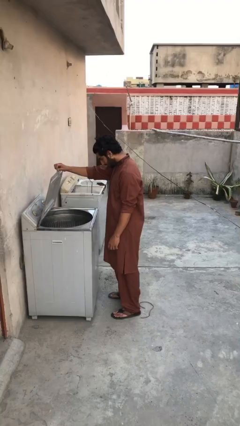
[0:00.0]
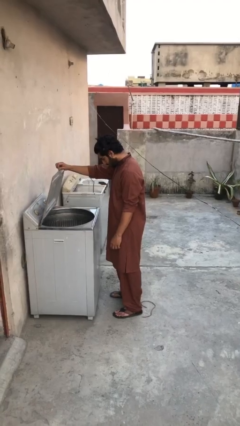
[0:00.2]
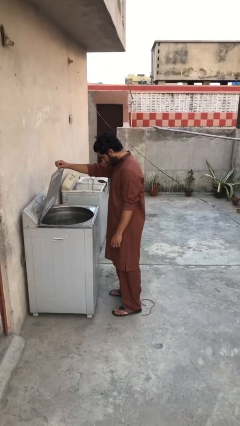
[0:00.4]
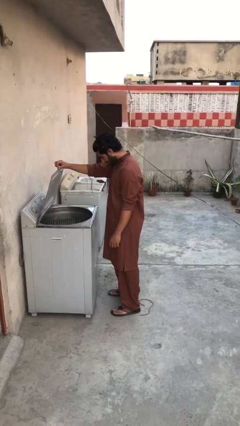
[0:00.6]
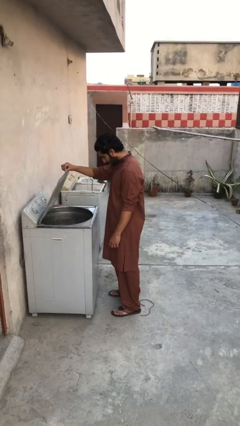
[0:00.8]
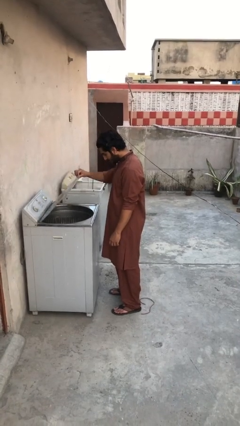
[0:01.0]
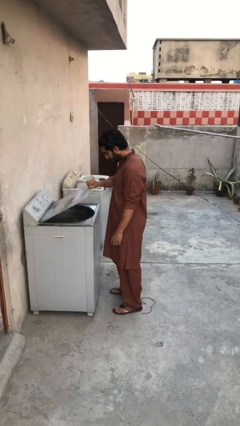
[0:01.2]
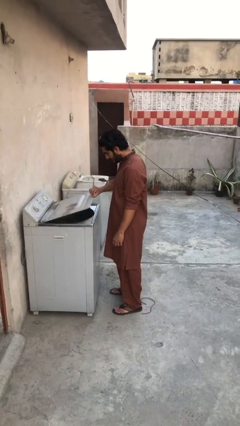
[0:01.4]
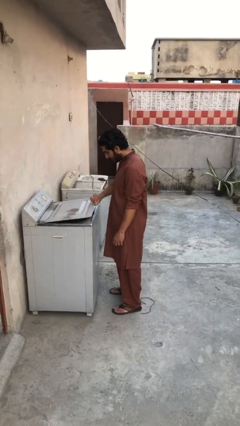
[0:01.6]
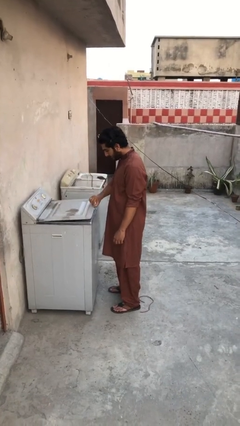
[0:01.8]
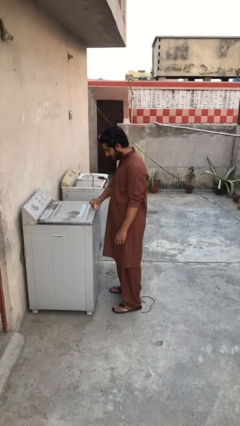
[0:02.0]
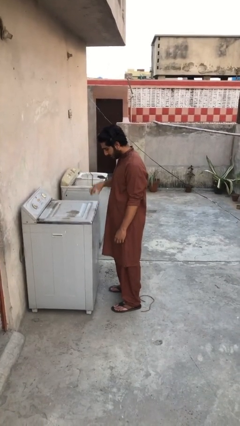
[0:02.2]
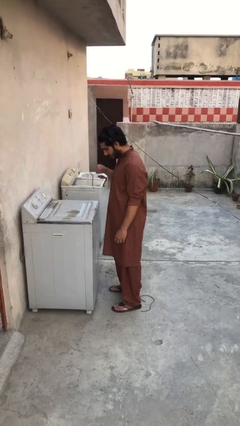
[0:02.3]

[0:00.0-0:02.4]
person closes clothes washer

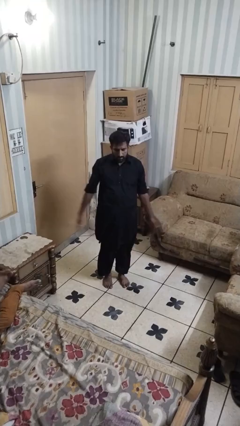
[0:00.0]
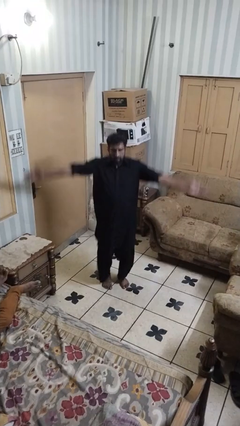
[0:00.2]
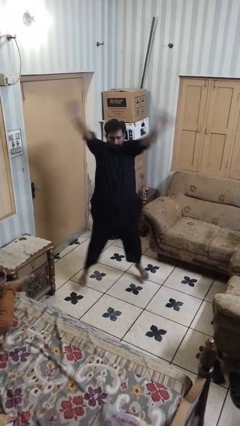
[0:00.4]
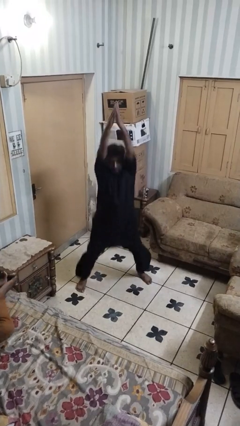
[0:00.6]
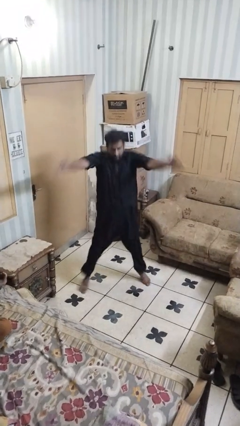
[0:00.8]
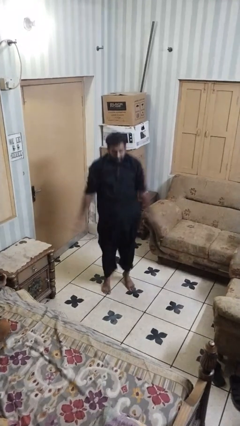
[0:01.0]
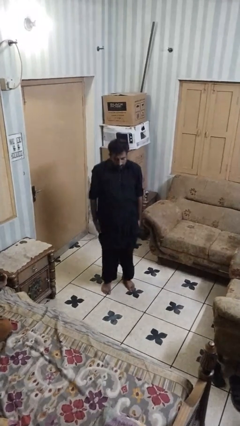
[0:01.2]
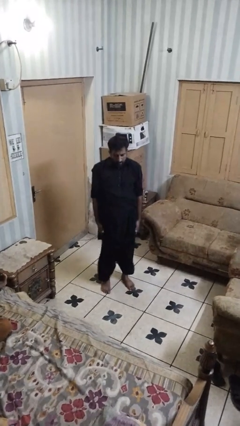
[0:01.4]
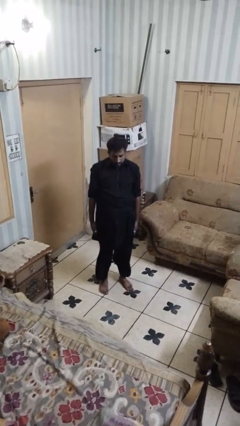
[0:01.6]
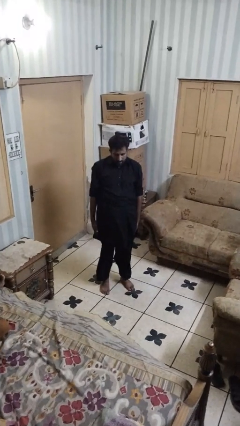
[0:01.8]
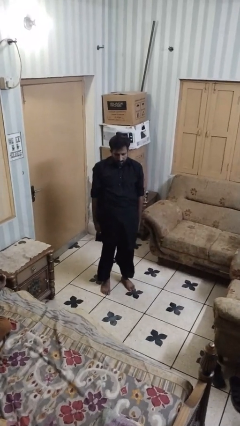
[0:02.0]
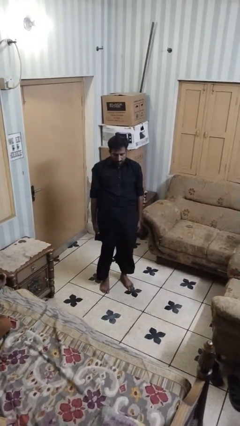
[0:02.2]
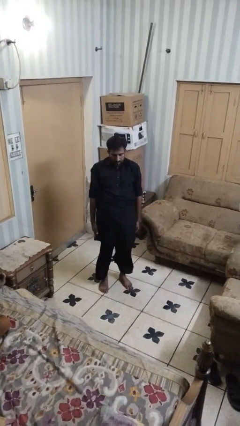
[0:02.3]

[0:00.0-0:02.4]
person exercises with jumping jacks

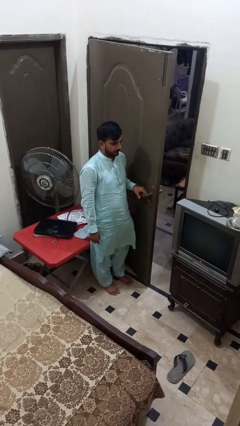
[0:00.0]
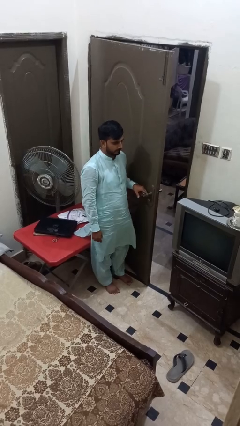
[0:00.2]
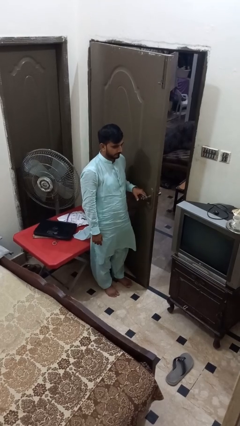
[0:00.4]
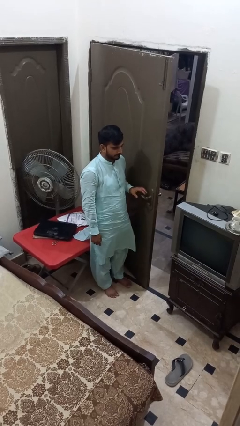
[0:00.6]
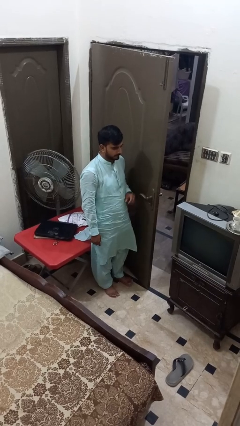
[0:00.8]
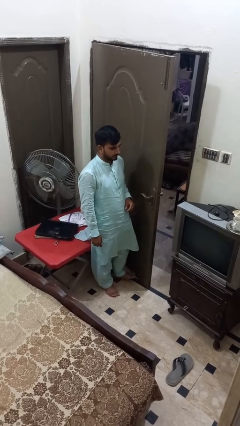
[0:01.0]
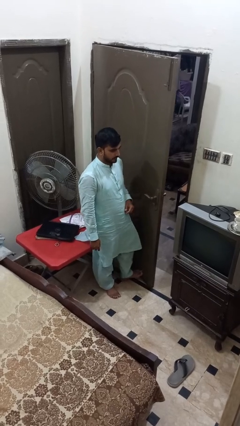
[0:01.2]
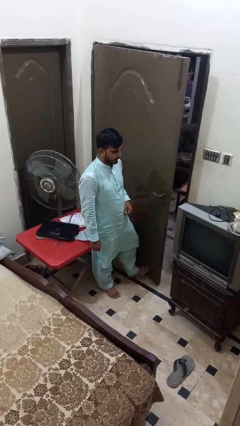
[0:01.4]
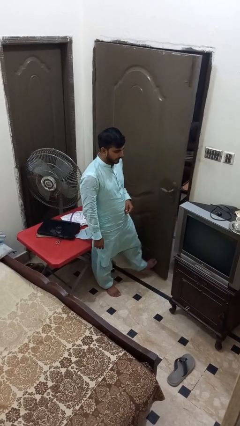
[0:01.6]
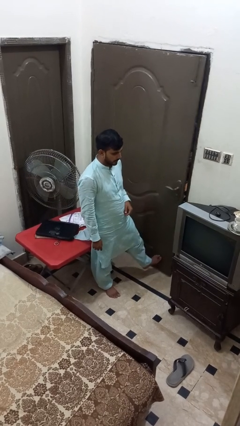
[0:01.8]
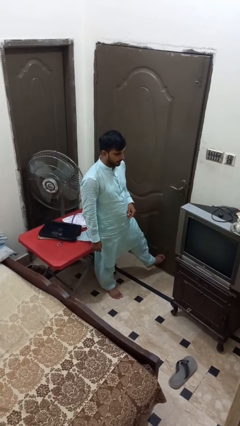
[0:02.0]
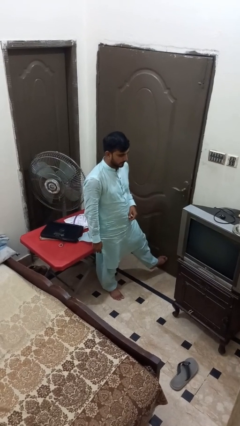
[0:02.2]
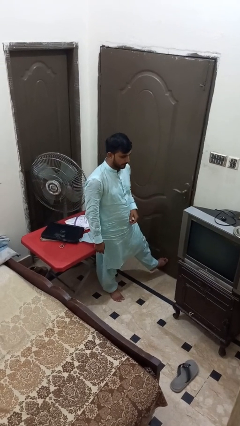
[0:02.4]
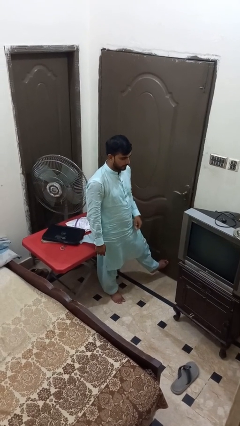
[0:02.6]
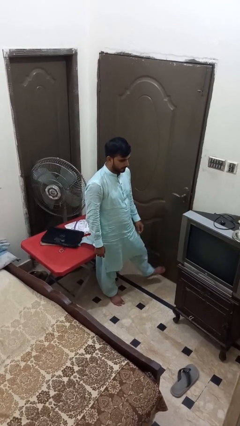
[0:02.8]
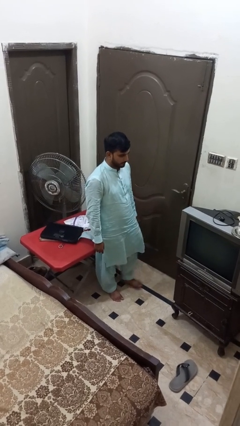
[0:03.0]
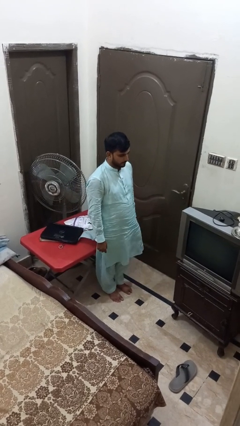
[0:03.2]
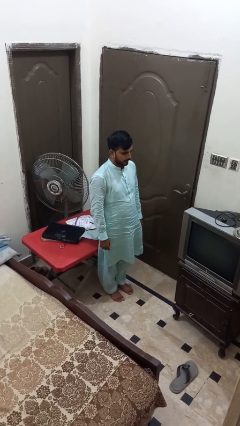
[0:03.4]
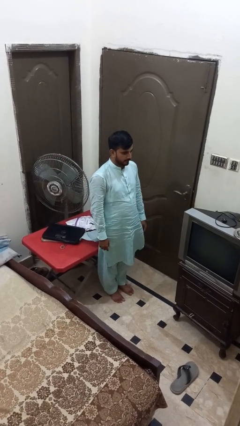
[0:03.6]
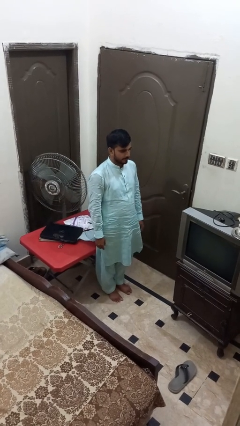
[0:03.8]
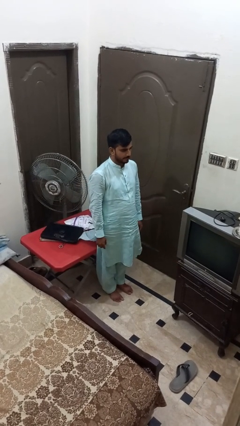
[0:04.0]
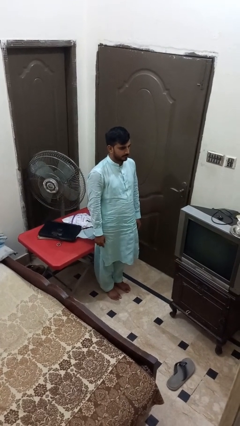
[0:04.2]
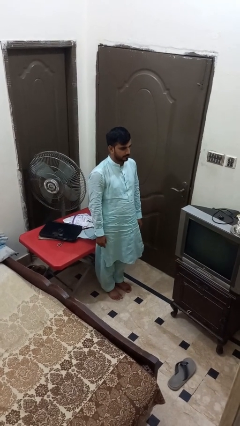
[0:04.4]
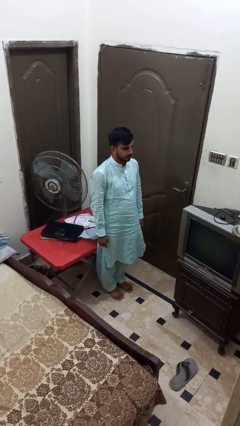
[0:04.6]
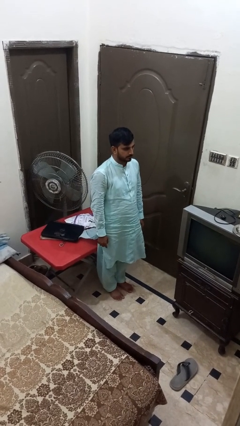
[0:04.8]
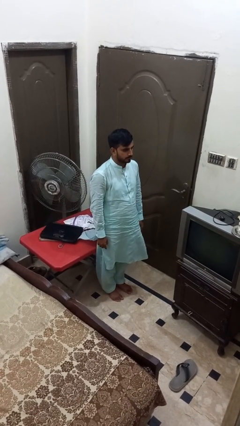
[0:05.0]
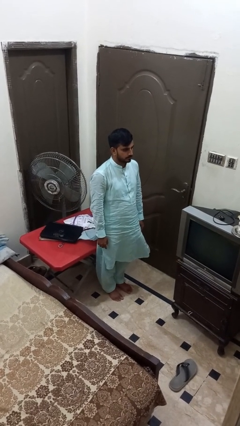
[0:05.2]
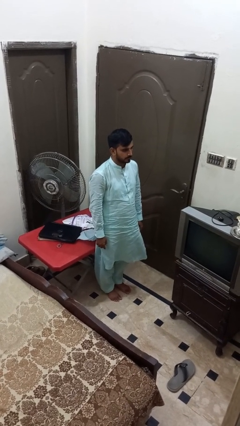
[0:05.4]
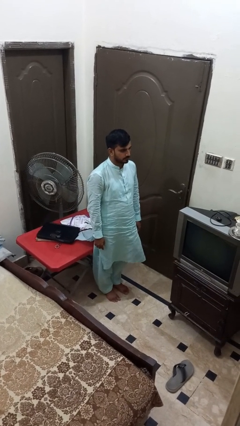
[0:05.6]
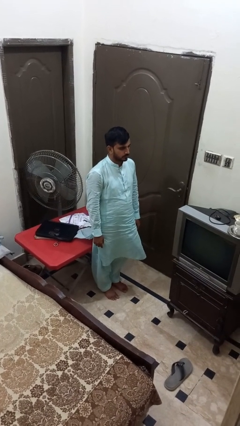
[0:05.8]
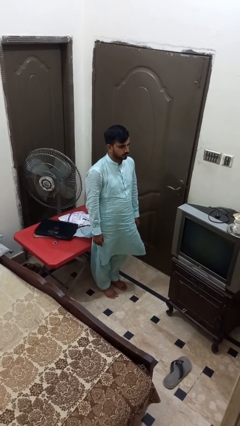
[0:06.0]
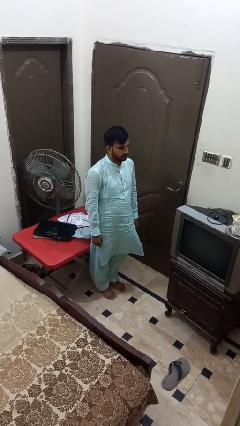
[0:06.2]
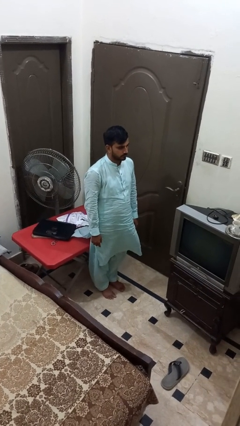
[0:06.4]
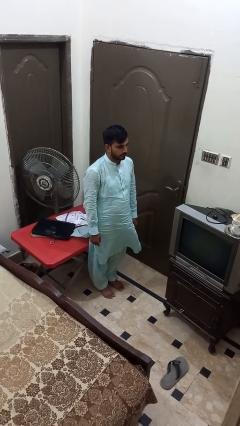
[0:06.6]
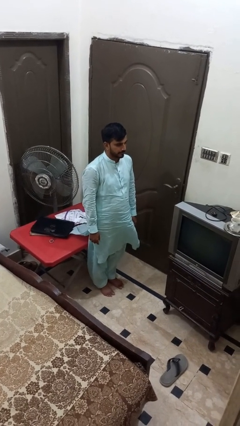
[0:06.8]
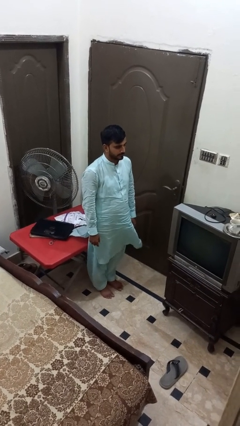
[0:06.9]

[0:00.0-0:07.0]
person closes door with foot

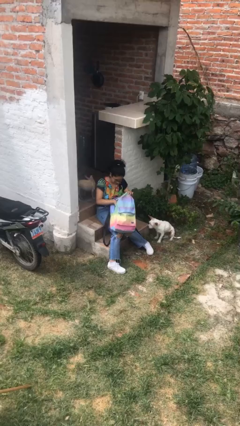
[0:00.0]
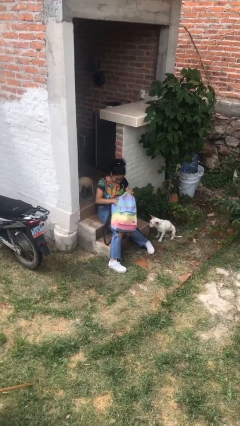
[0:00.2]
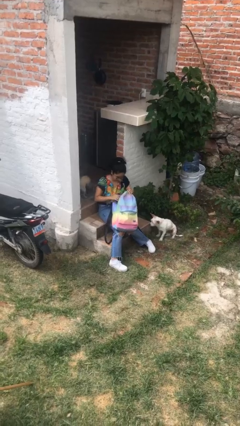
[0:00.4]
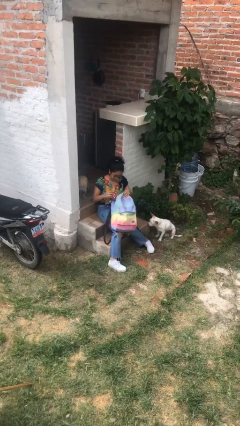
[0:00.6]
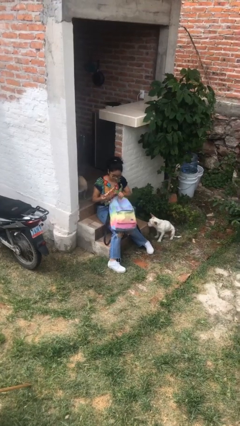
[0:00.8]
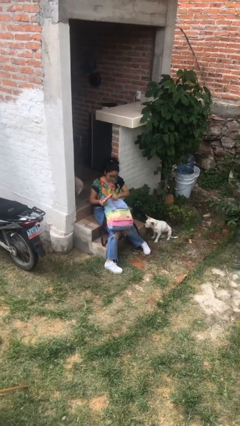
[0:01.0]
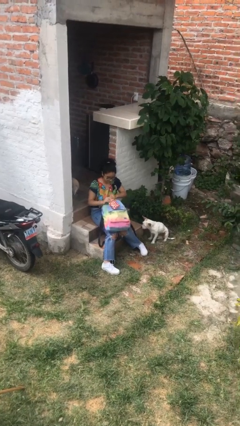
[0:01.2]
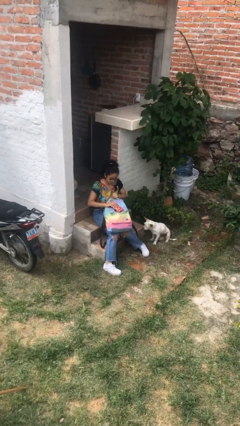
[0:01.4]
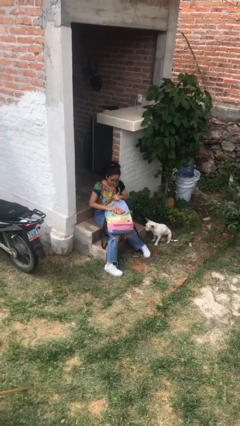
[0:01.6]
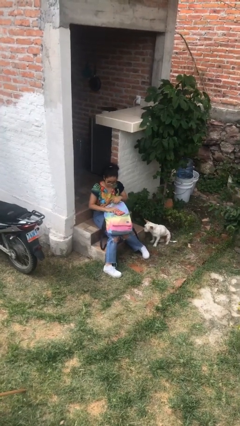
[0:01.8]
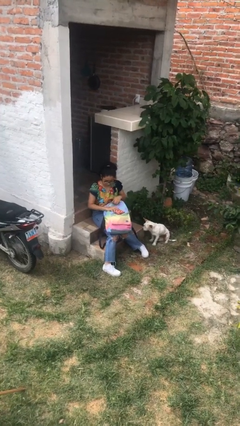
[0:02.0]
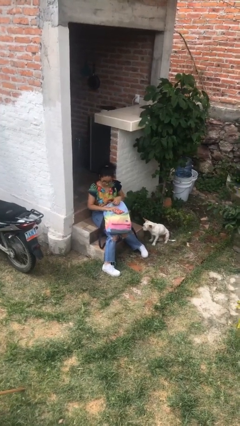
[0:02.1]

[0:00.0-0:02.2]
person takes object from backpack

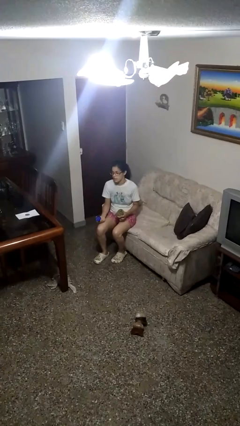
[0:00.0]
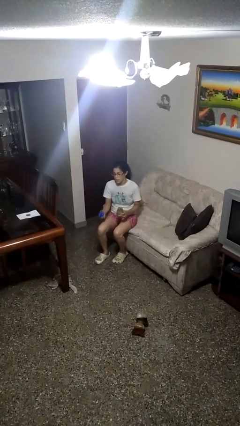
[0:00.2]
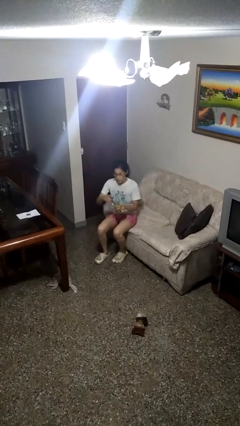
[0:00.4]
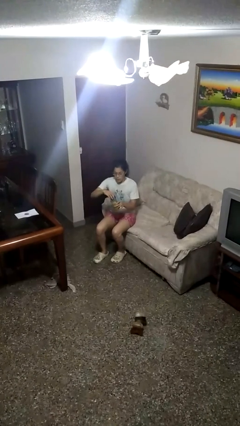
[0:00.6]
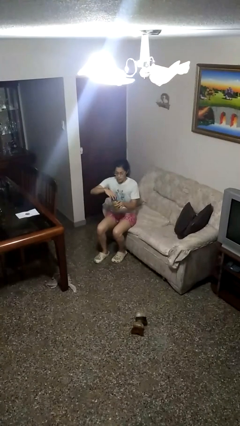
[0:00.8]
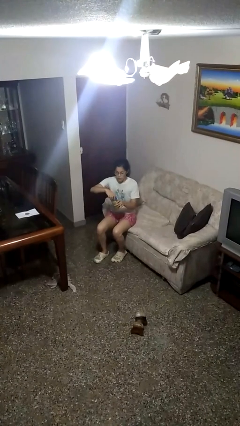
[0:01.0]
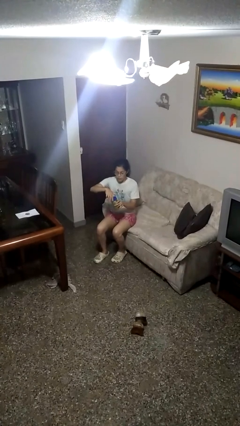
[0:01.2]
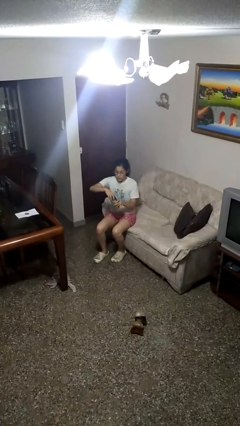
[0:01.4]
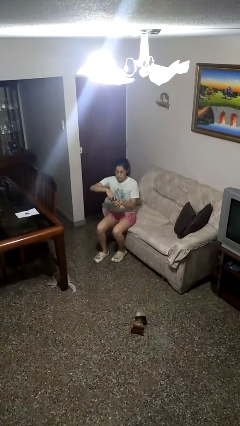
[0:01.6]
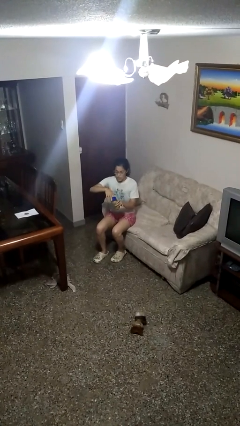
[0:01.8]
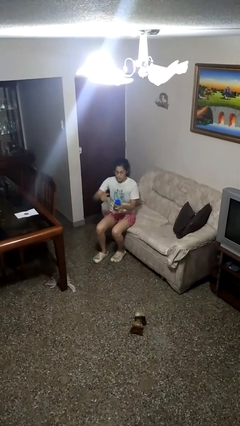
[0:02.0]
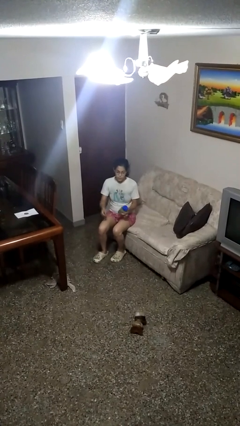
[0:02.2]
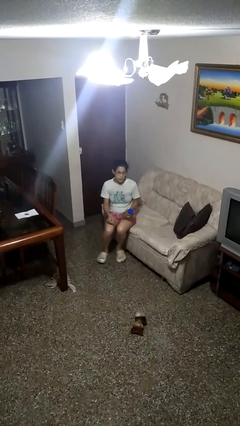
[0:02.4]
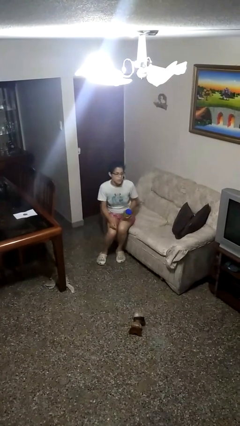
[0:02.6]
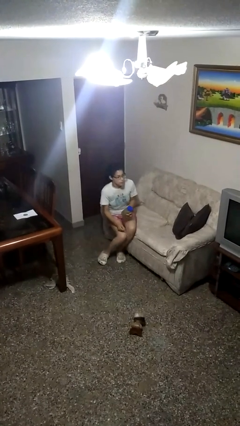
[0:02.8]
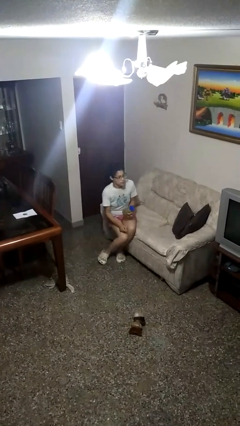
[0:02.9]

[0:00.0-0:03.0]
person closes jar

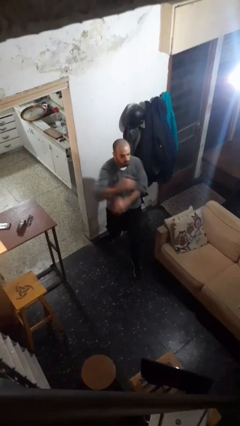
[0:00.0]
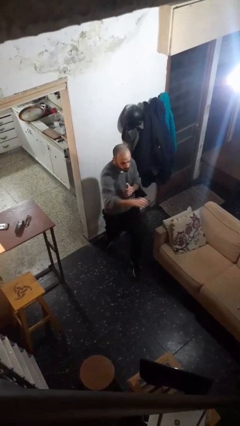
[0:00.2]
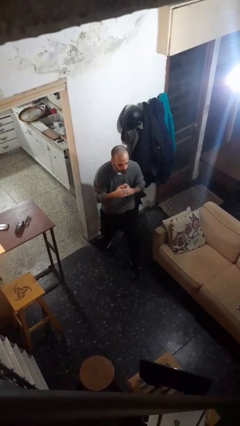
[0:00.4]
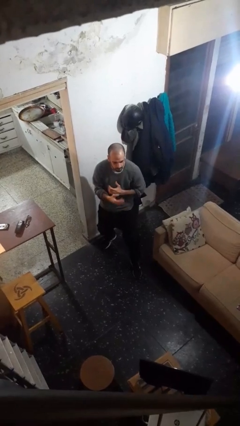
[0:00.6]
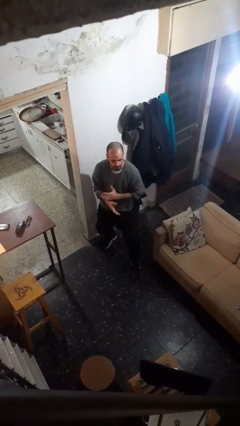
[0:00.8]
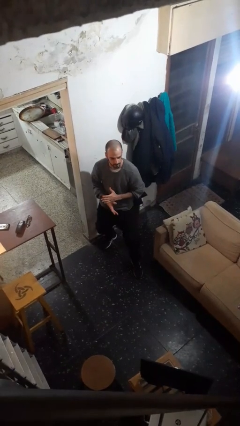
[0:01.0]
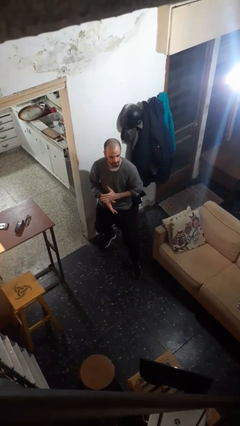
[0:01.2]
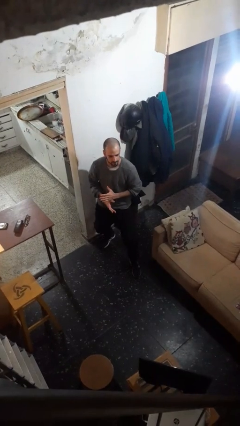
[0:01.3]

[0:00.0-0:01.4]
person karate chop
